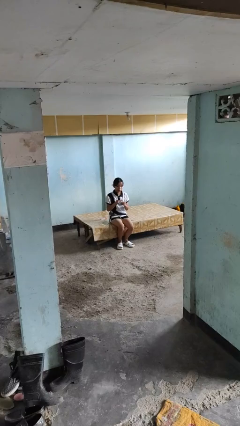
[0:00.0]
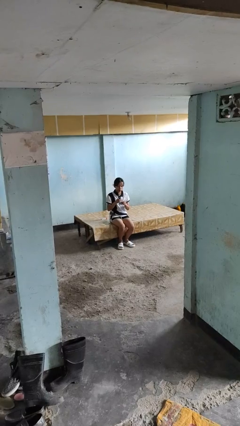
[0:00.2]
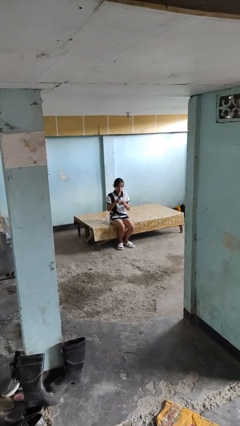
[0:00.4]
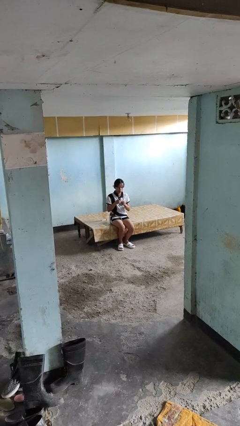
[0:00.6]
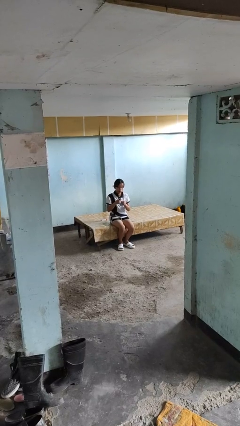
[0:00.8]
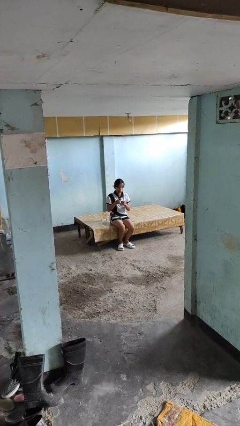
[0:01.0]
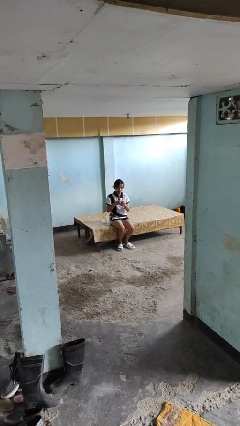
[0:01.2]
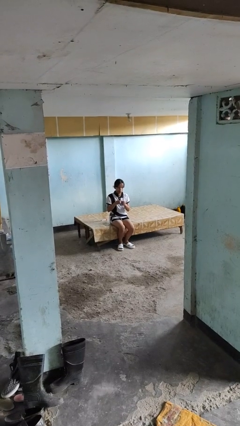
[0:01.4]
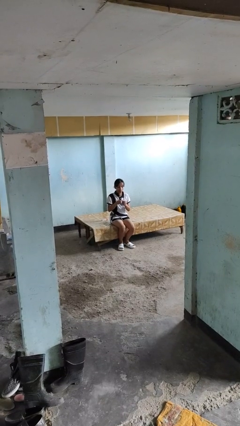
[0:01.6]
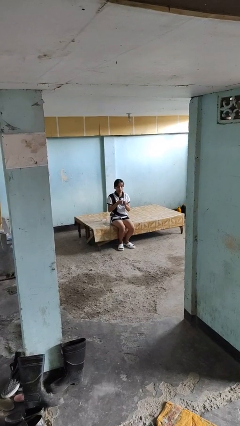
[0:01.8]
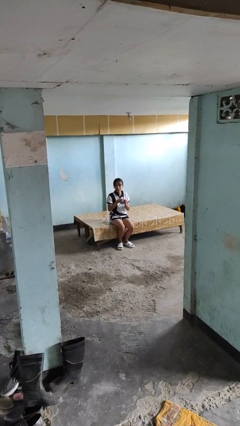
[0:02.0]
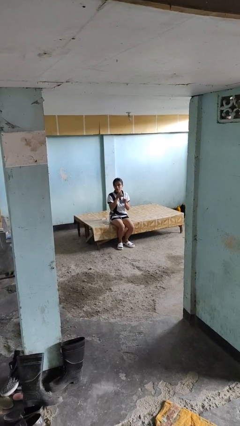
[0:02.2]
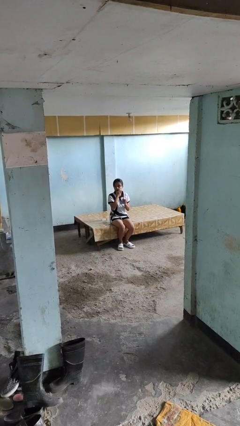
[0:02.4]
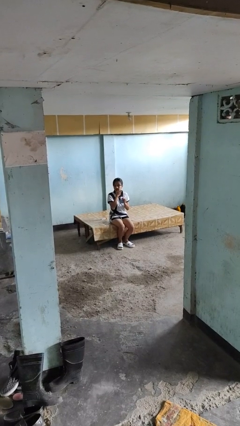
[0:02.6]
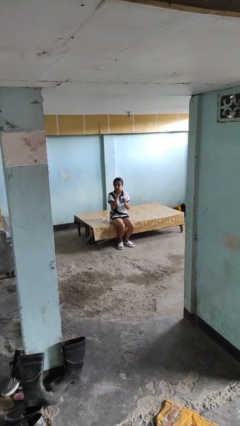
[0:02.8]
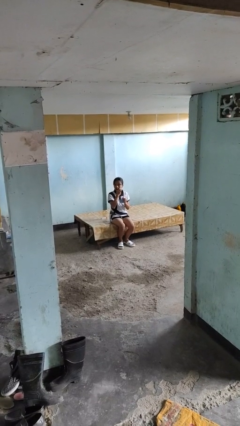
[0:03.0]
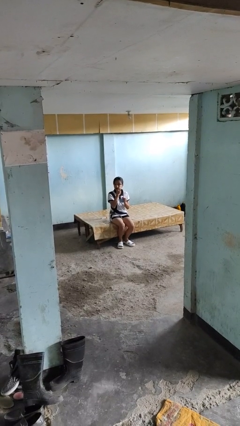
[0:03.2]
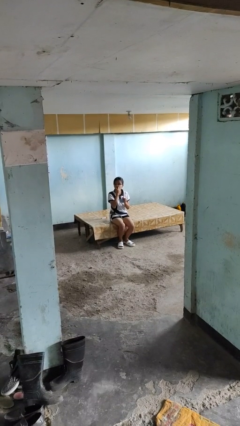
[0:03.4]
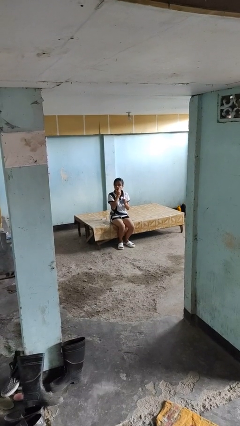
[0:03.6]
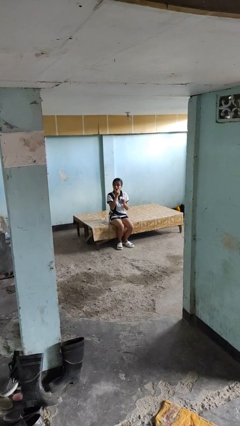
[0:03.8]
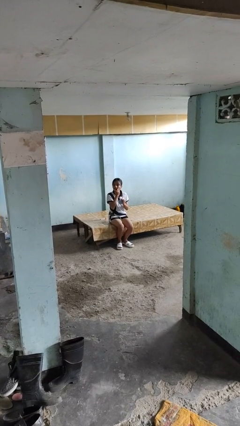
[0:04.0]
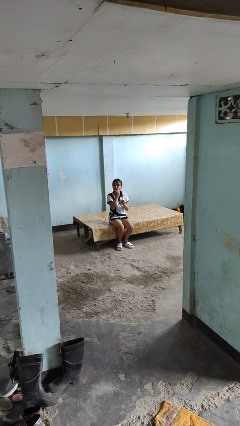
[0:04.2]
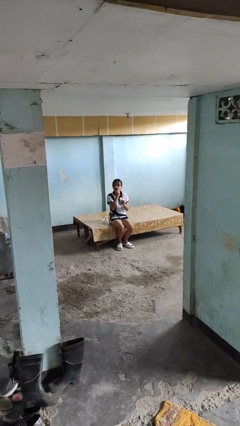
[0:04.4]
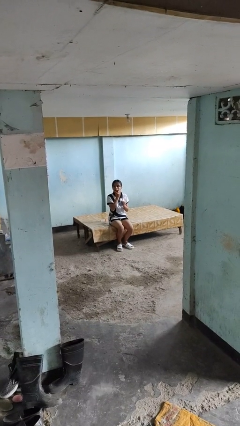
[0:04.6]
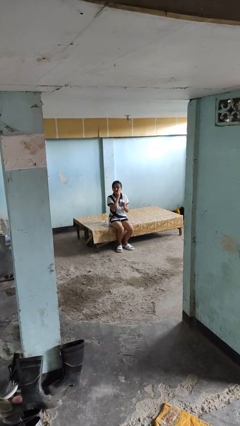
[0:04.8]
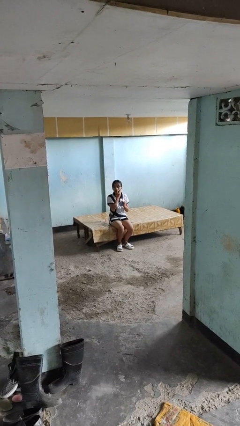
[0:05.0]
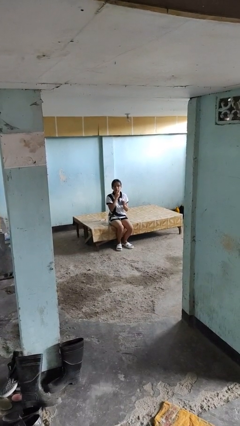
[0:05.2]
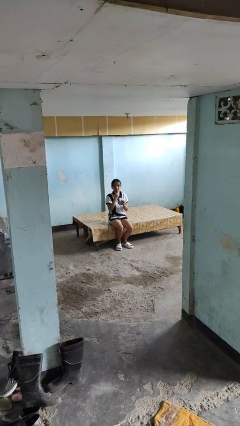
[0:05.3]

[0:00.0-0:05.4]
person applies facial moisturizer

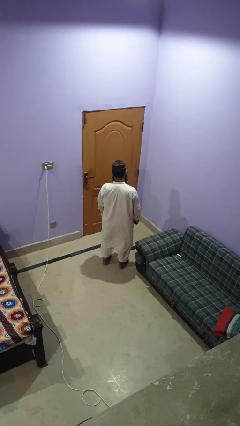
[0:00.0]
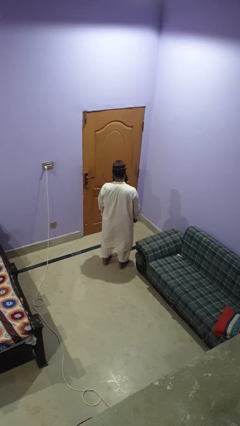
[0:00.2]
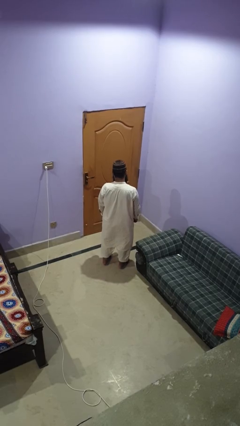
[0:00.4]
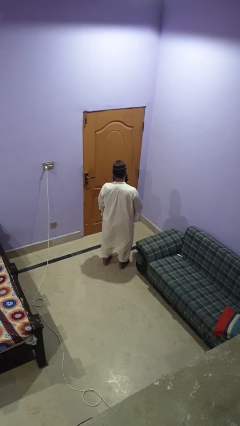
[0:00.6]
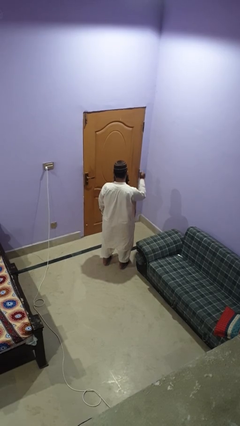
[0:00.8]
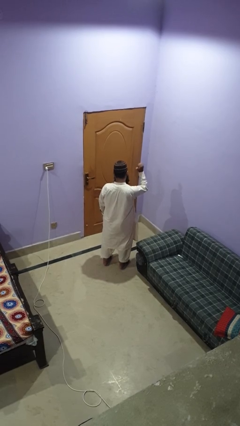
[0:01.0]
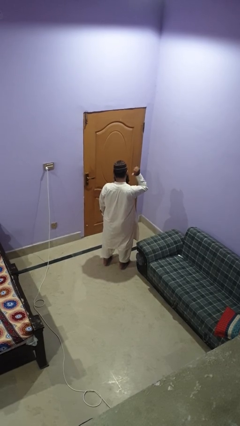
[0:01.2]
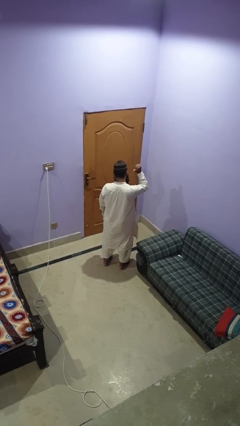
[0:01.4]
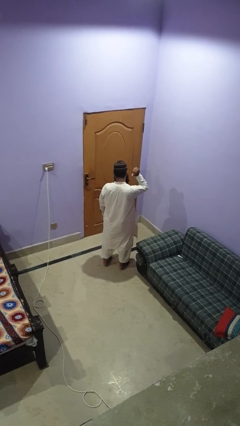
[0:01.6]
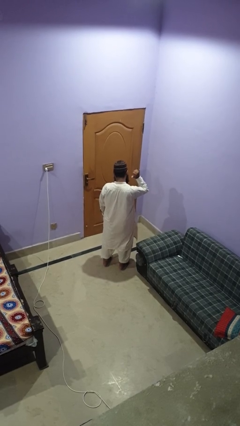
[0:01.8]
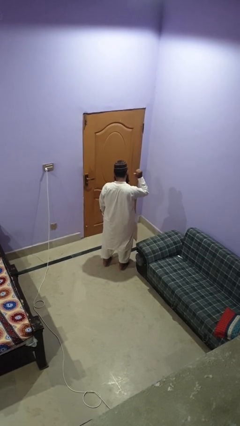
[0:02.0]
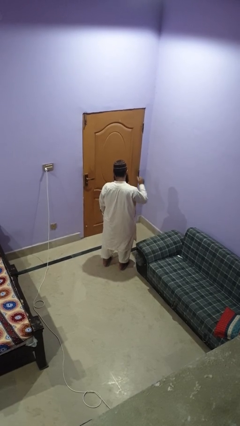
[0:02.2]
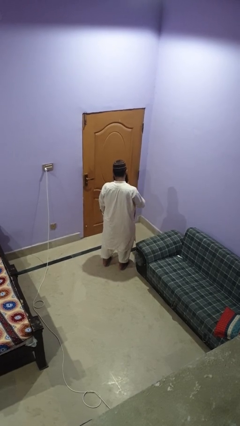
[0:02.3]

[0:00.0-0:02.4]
person gestures behind me

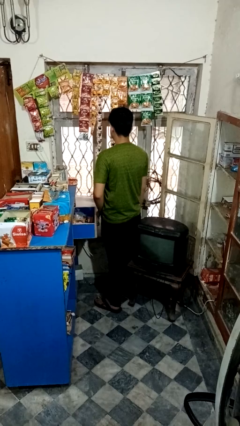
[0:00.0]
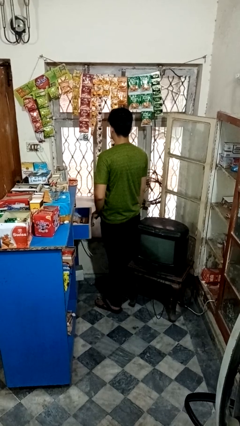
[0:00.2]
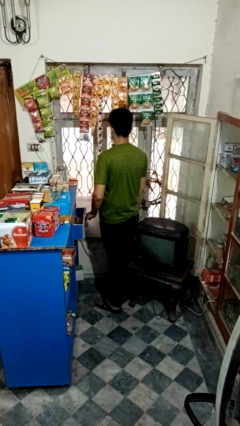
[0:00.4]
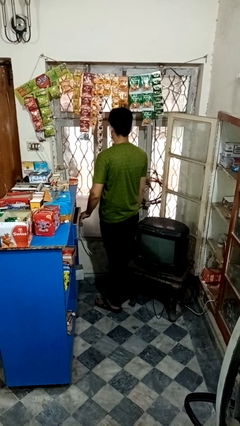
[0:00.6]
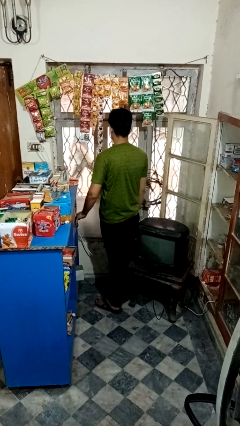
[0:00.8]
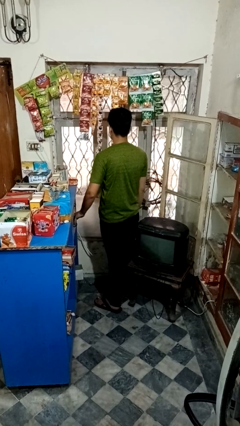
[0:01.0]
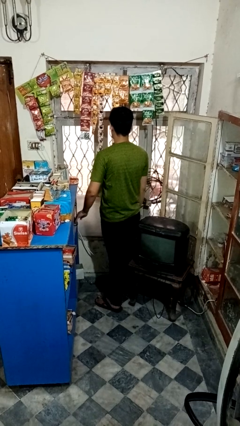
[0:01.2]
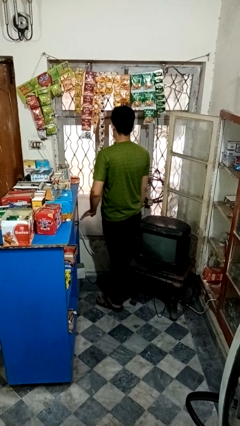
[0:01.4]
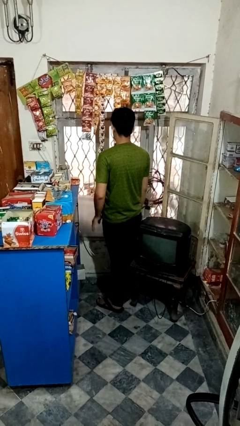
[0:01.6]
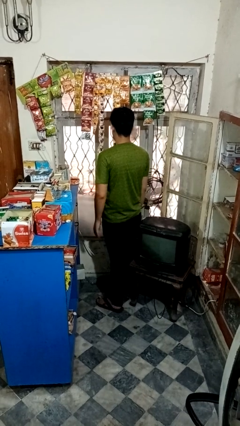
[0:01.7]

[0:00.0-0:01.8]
person closes kitchen drawer

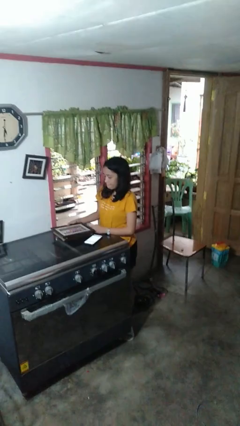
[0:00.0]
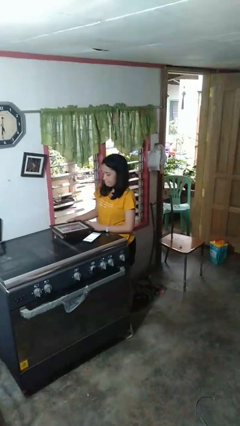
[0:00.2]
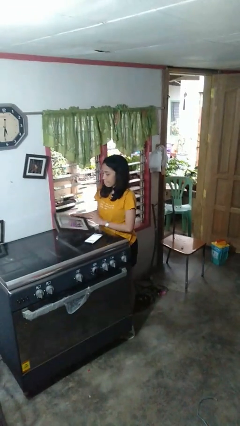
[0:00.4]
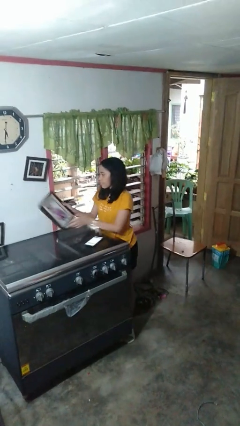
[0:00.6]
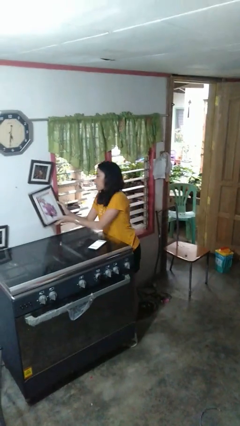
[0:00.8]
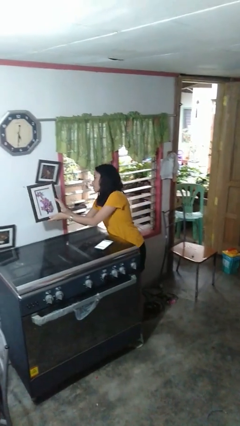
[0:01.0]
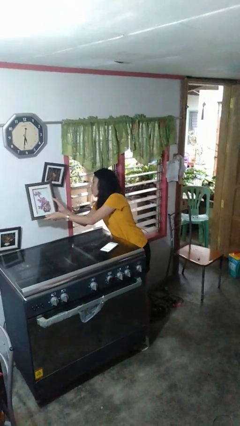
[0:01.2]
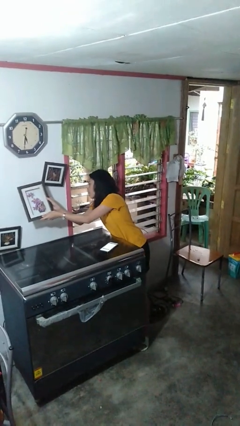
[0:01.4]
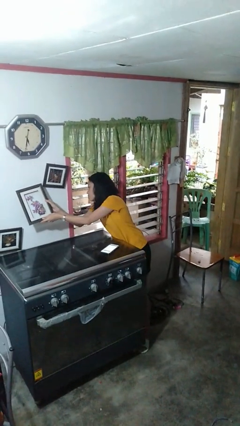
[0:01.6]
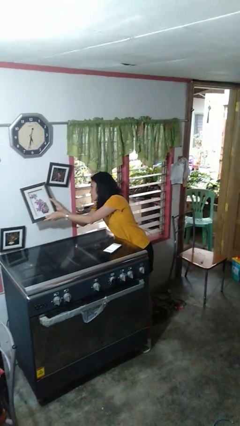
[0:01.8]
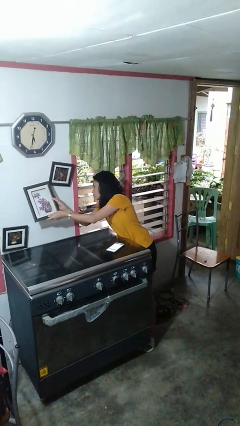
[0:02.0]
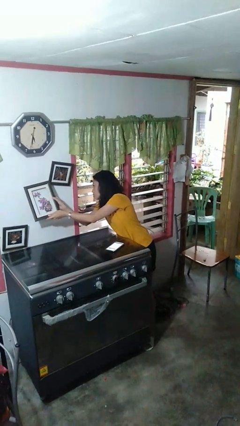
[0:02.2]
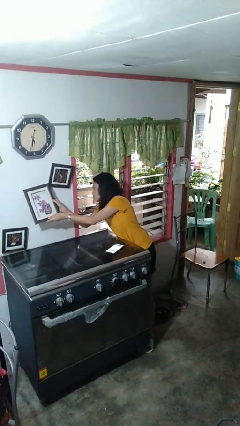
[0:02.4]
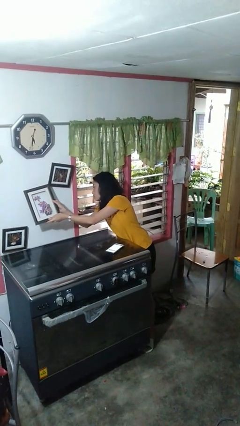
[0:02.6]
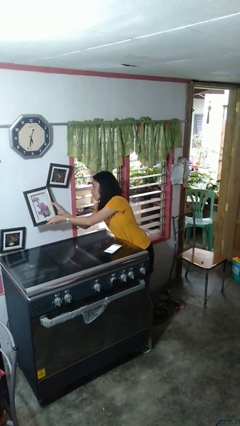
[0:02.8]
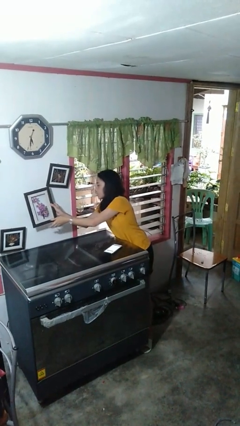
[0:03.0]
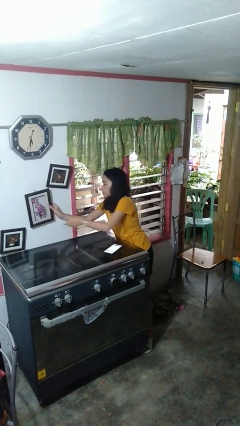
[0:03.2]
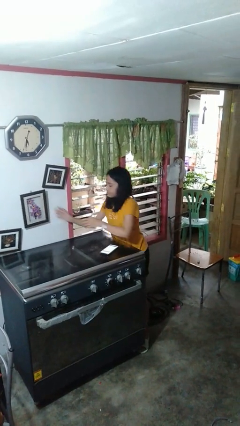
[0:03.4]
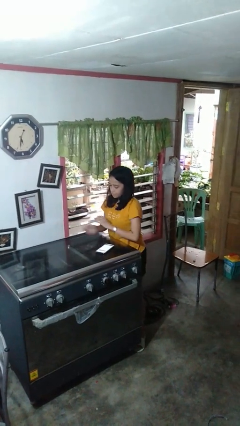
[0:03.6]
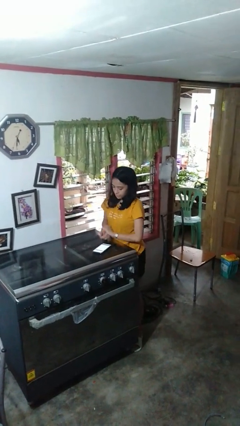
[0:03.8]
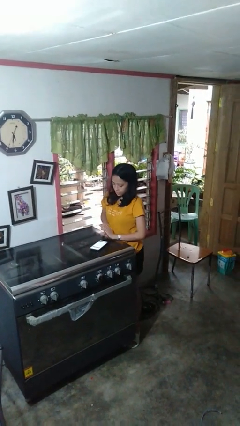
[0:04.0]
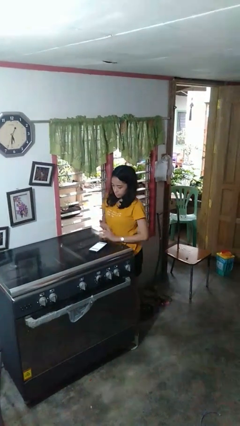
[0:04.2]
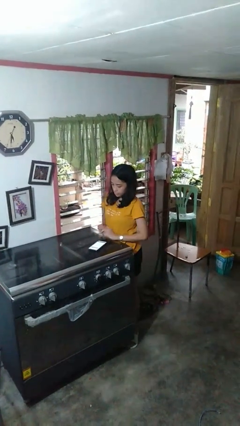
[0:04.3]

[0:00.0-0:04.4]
person puts up picture frame

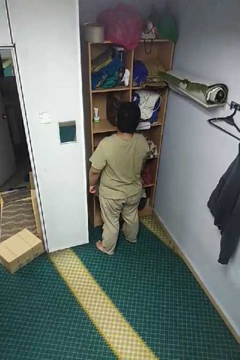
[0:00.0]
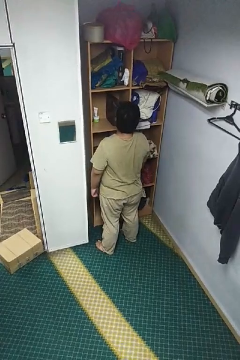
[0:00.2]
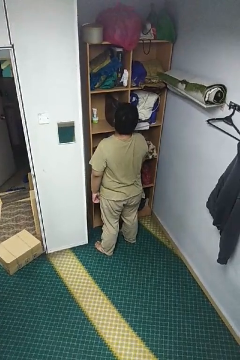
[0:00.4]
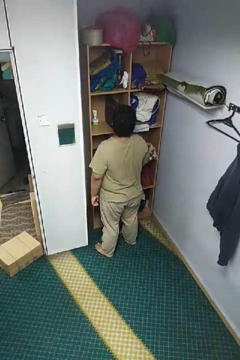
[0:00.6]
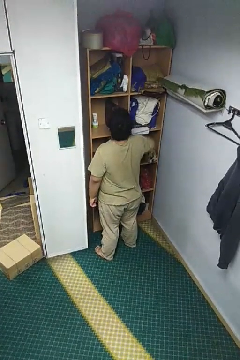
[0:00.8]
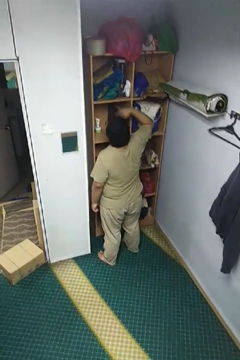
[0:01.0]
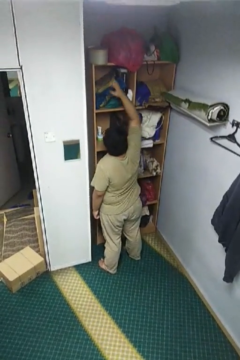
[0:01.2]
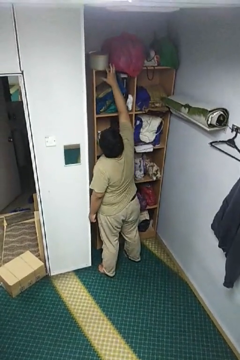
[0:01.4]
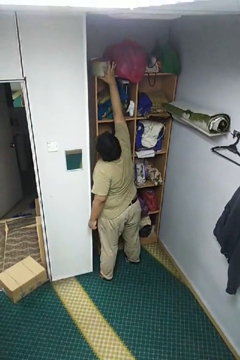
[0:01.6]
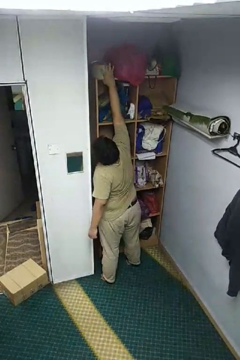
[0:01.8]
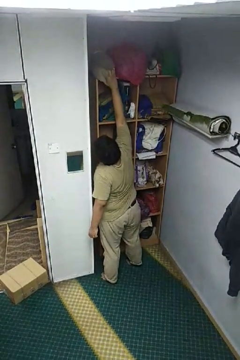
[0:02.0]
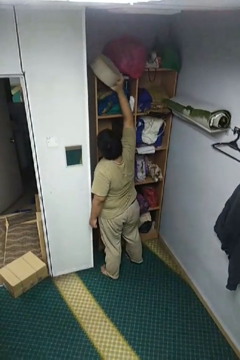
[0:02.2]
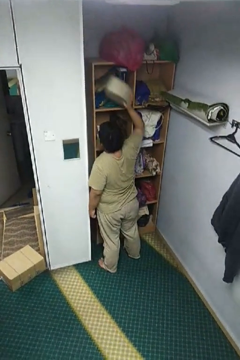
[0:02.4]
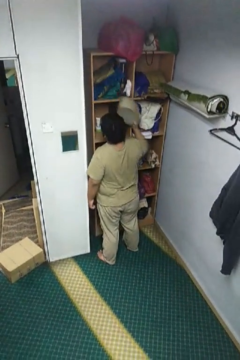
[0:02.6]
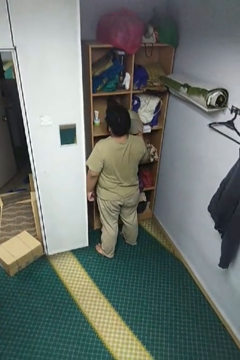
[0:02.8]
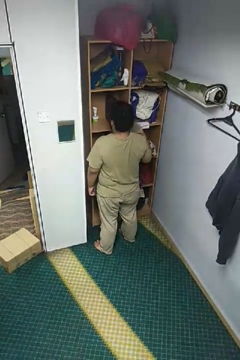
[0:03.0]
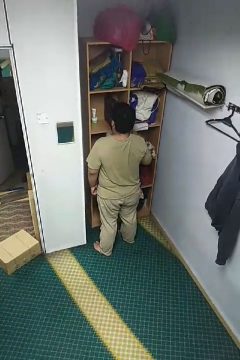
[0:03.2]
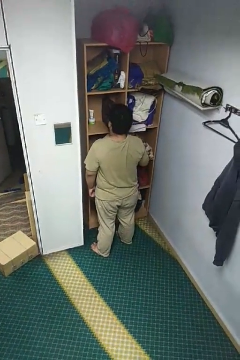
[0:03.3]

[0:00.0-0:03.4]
person picks up object from shelf

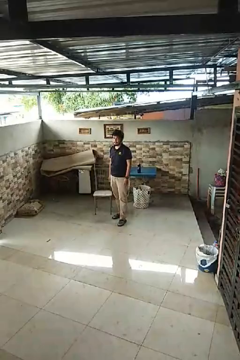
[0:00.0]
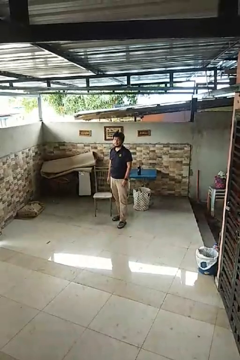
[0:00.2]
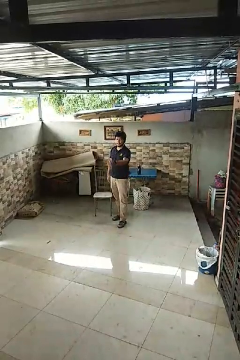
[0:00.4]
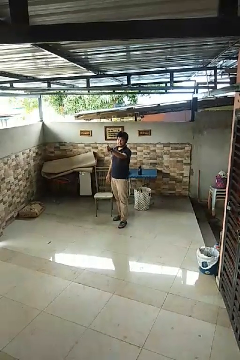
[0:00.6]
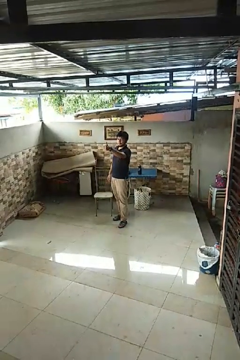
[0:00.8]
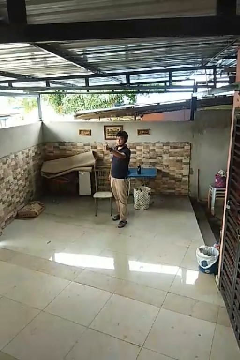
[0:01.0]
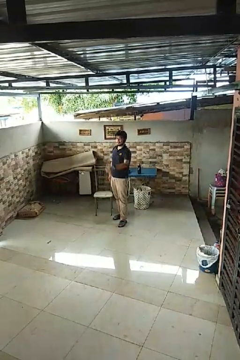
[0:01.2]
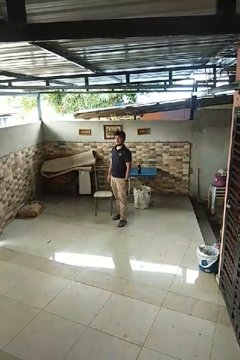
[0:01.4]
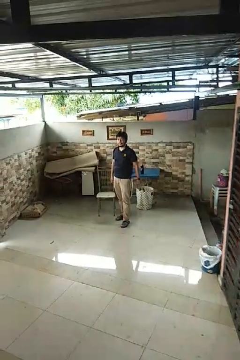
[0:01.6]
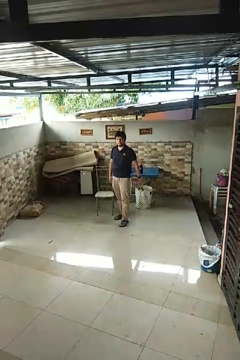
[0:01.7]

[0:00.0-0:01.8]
person gestures thumbs up
